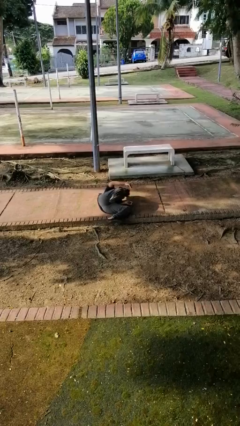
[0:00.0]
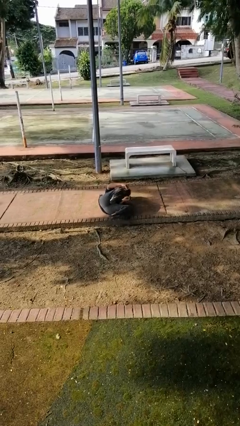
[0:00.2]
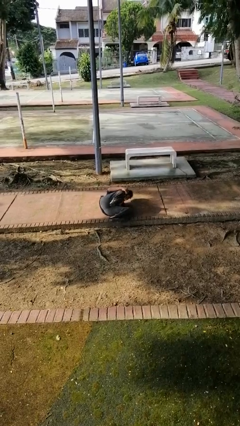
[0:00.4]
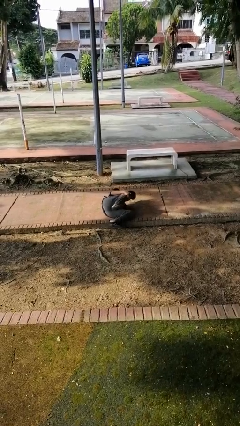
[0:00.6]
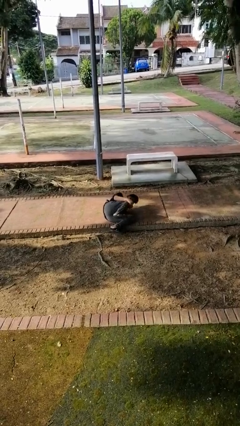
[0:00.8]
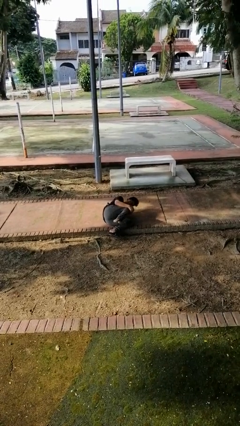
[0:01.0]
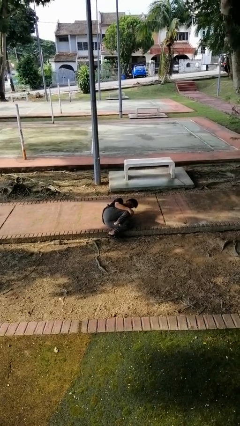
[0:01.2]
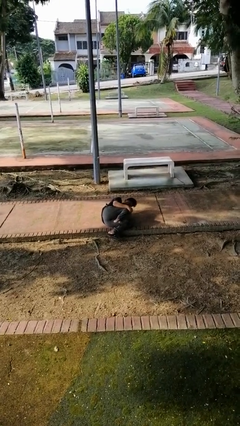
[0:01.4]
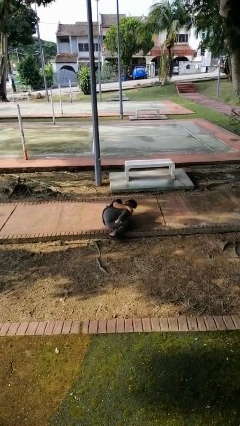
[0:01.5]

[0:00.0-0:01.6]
person lies down on floor

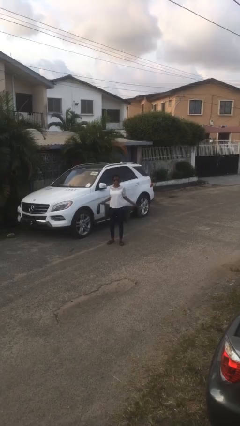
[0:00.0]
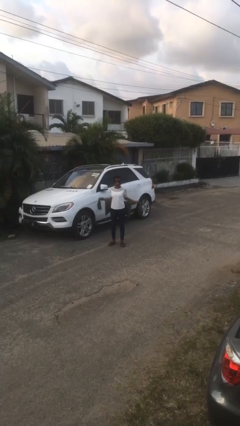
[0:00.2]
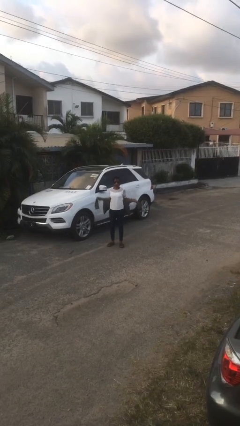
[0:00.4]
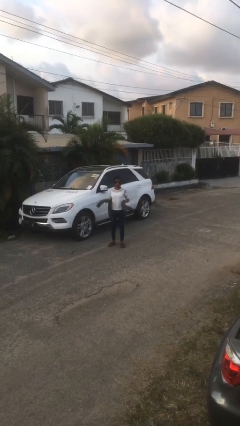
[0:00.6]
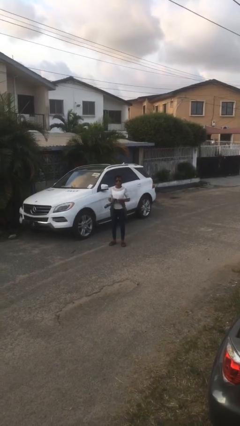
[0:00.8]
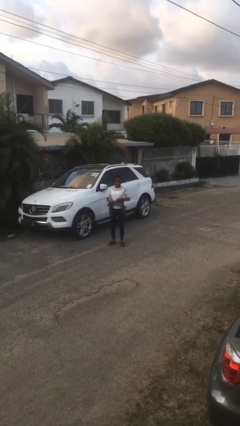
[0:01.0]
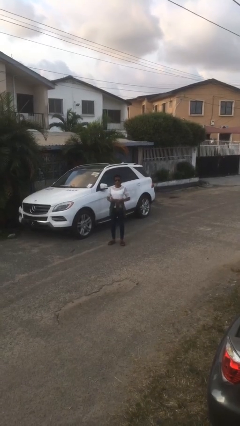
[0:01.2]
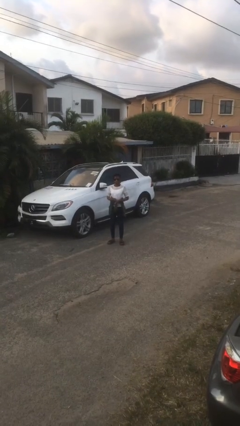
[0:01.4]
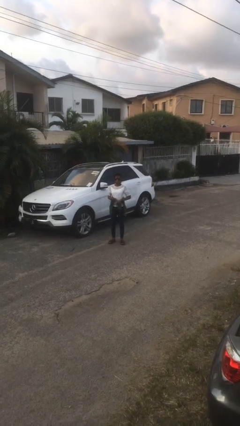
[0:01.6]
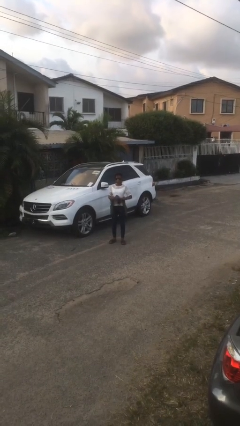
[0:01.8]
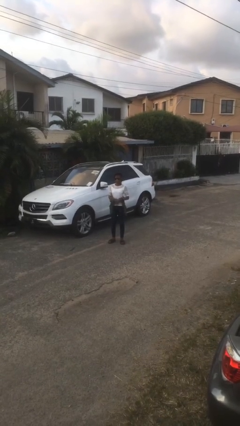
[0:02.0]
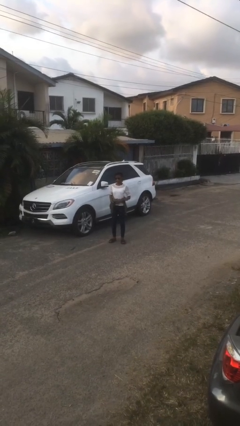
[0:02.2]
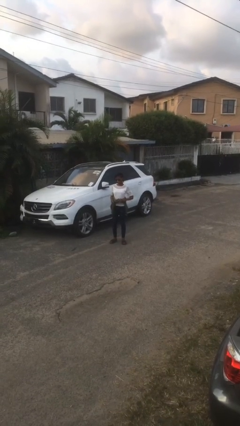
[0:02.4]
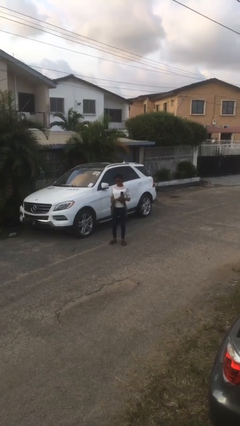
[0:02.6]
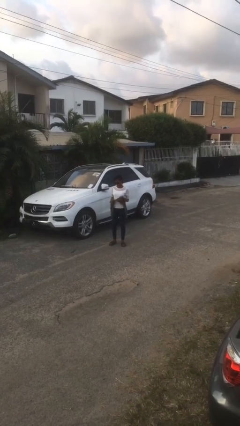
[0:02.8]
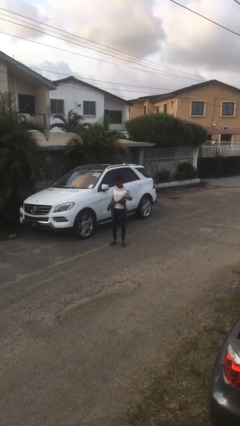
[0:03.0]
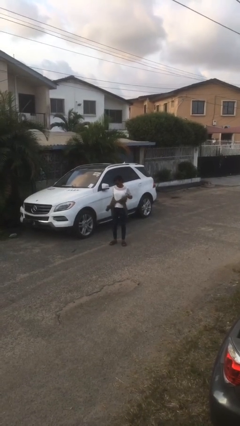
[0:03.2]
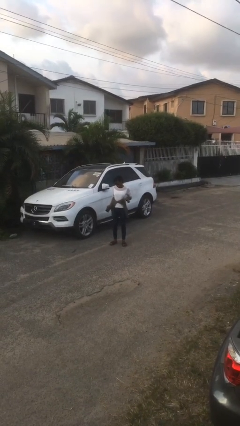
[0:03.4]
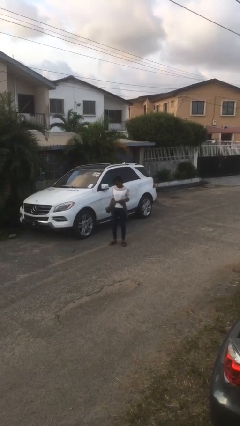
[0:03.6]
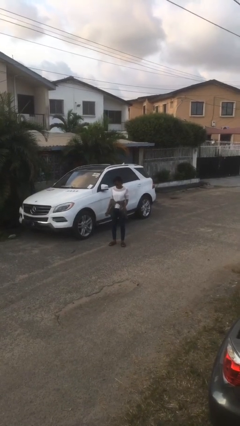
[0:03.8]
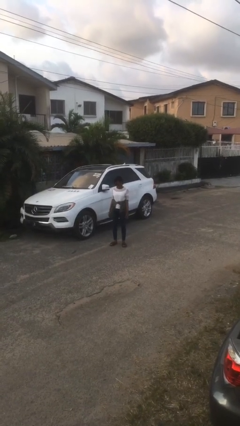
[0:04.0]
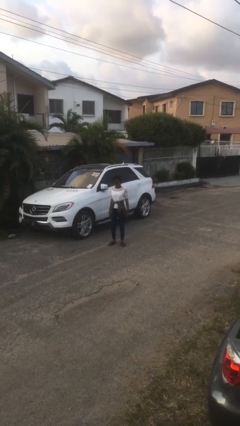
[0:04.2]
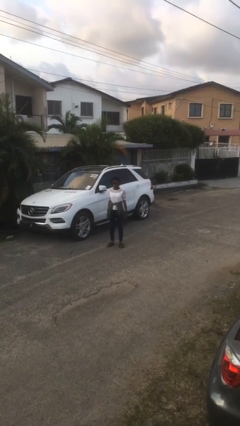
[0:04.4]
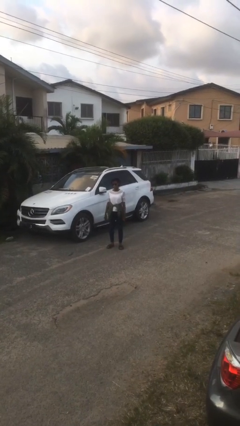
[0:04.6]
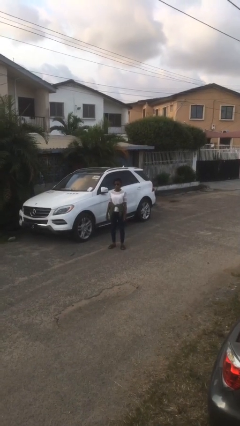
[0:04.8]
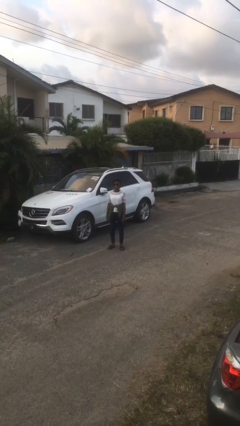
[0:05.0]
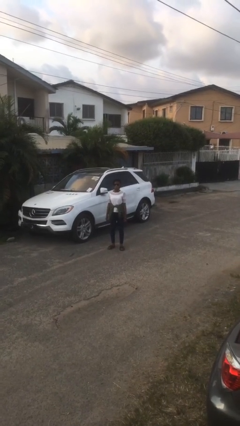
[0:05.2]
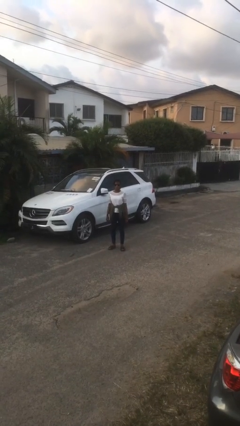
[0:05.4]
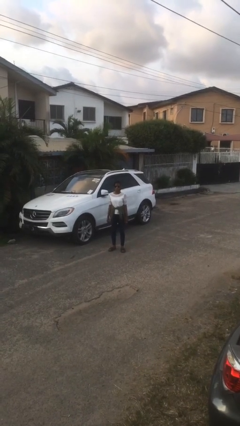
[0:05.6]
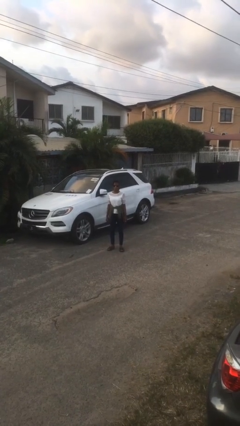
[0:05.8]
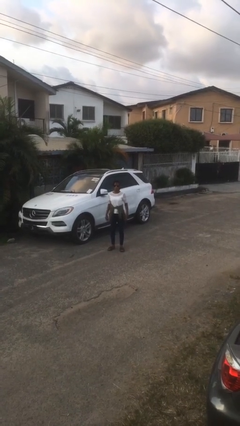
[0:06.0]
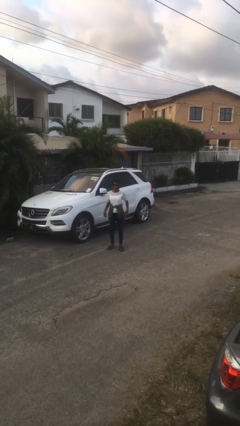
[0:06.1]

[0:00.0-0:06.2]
person ties jacket around waist

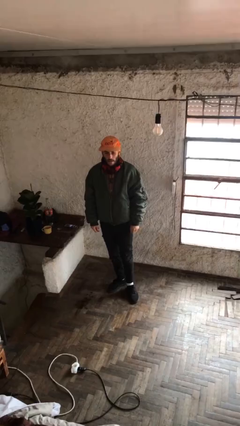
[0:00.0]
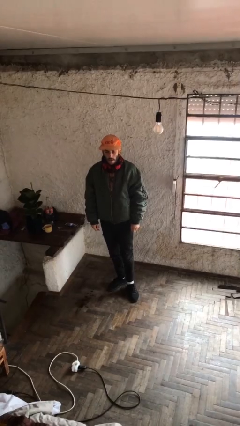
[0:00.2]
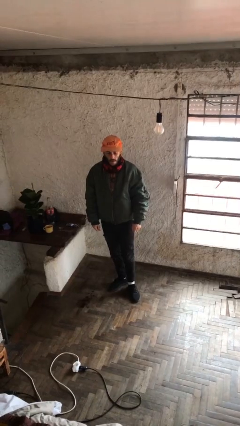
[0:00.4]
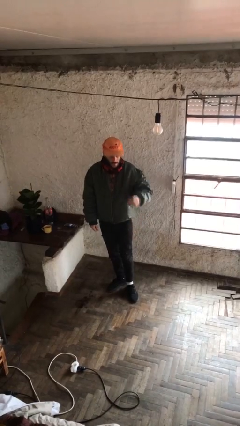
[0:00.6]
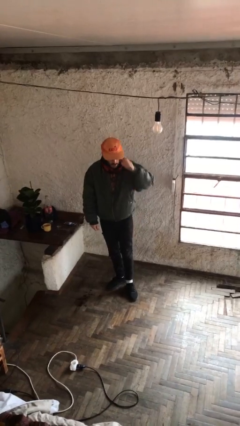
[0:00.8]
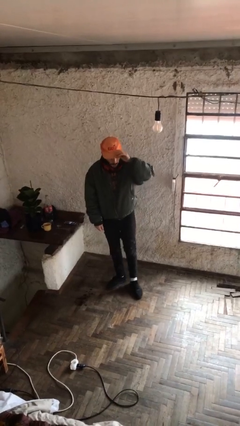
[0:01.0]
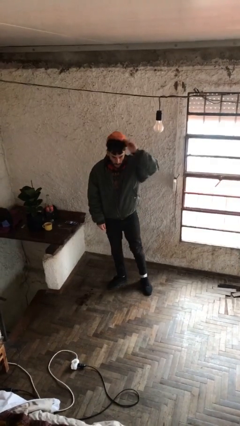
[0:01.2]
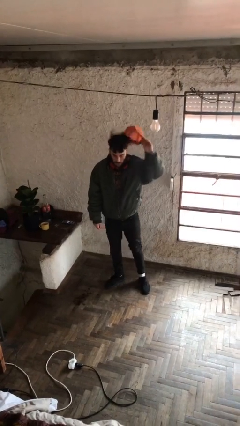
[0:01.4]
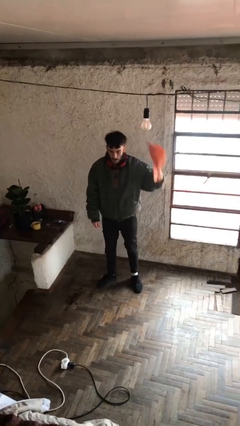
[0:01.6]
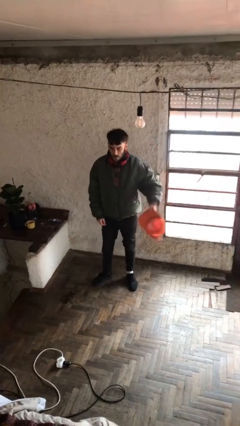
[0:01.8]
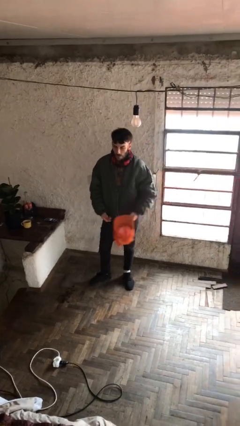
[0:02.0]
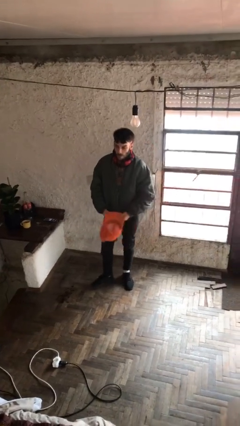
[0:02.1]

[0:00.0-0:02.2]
person takes off hat

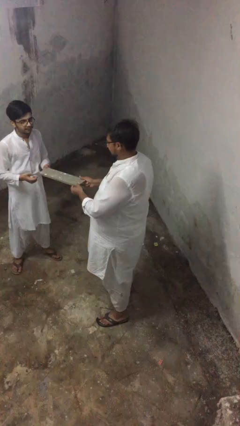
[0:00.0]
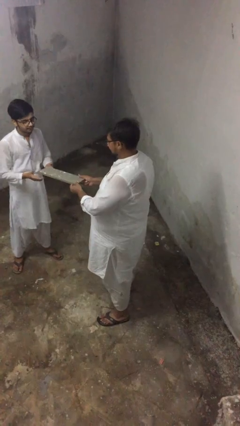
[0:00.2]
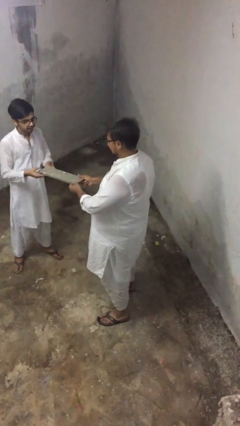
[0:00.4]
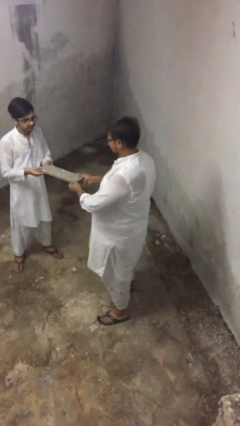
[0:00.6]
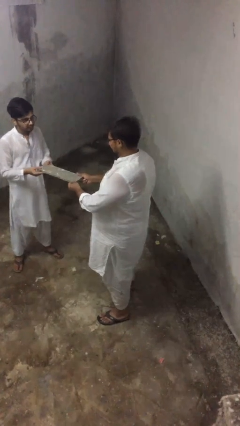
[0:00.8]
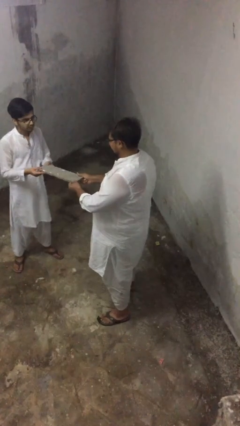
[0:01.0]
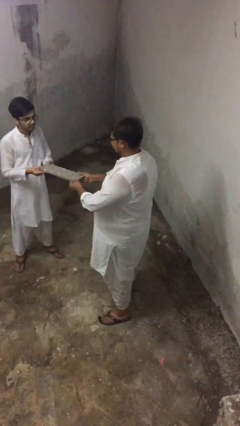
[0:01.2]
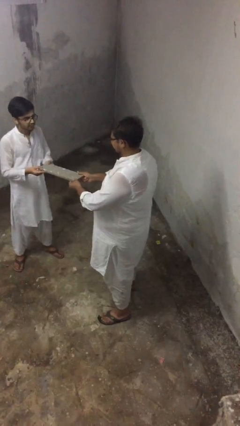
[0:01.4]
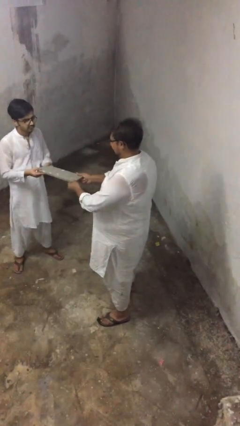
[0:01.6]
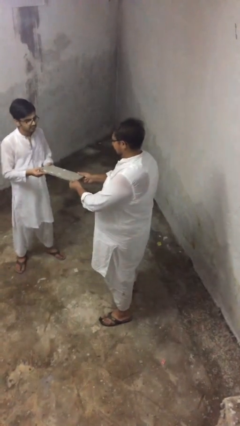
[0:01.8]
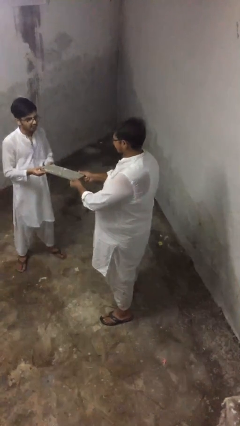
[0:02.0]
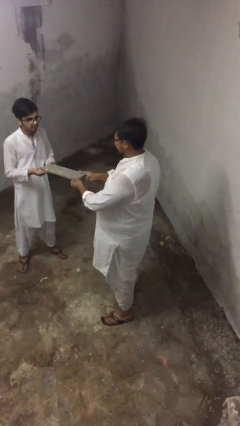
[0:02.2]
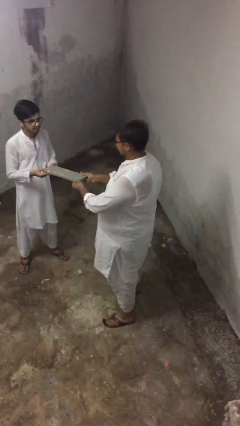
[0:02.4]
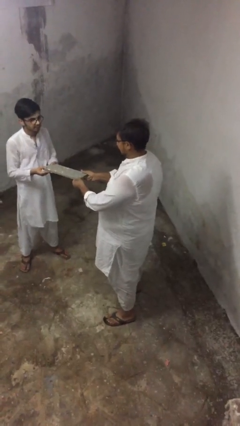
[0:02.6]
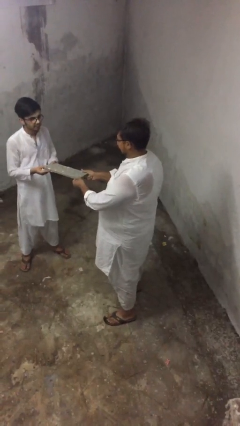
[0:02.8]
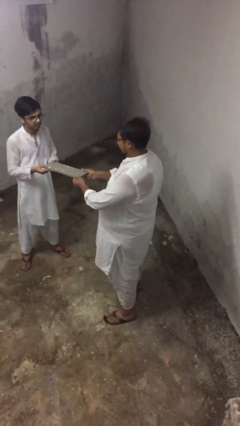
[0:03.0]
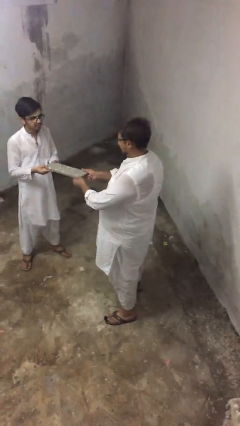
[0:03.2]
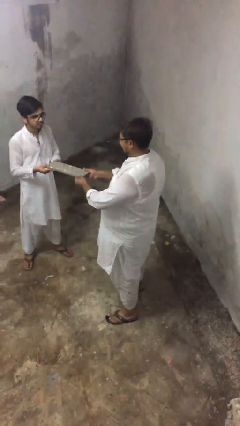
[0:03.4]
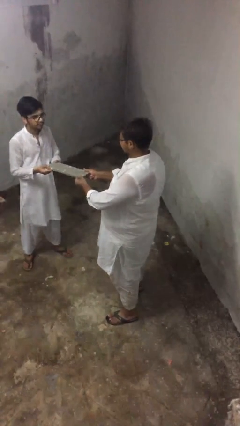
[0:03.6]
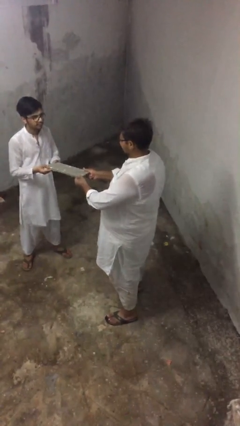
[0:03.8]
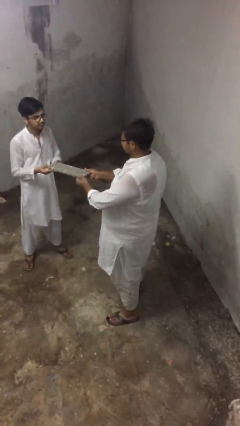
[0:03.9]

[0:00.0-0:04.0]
person transfers object to person

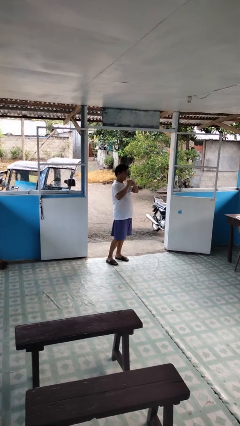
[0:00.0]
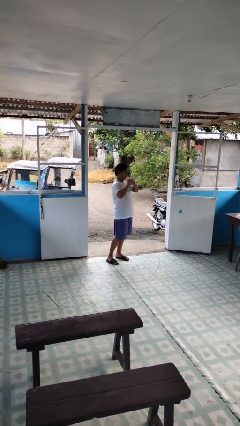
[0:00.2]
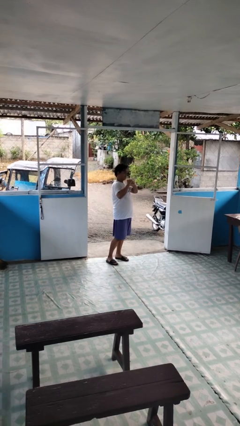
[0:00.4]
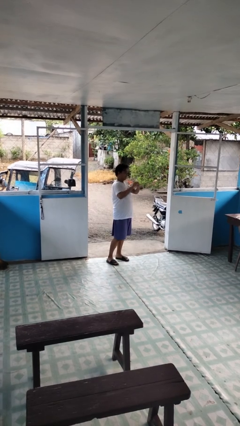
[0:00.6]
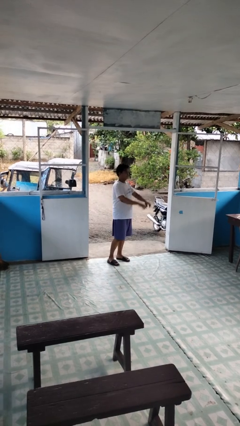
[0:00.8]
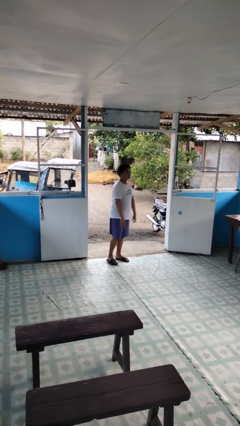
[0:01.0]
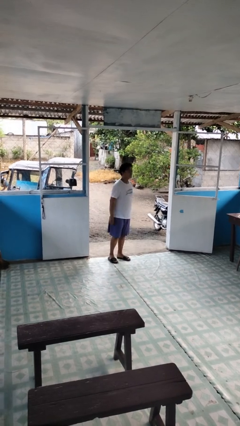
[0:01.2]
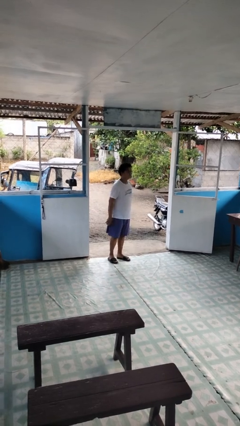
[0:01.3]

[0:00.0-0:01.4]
person gestures heart

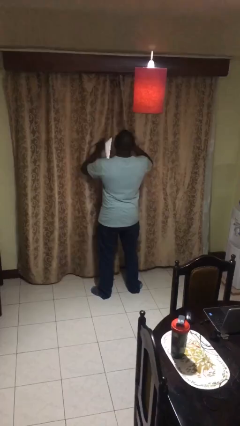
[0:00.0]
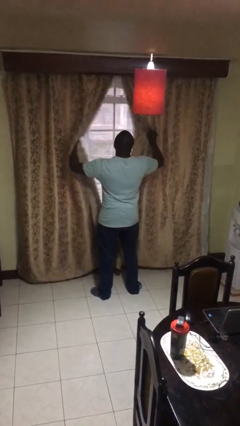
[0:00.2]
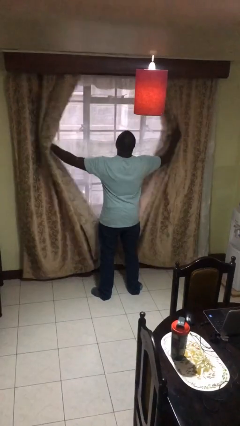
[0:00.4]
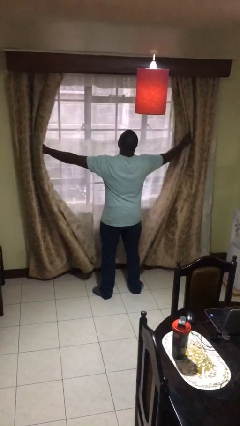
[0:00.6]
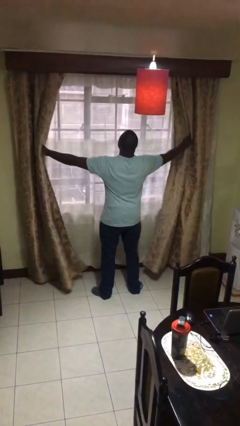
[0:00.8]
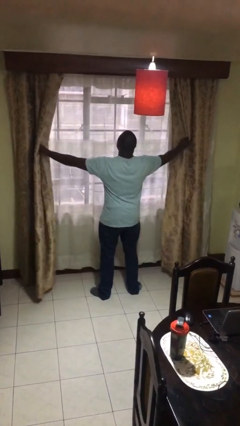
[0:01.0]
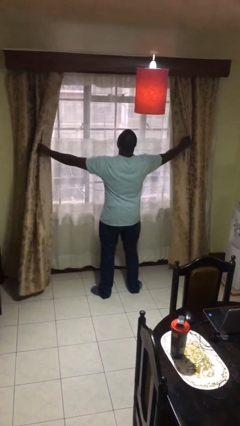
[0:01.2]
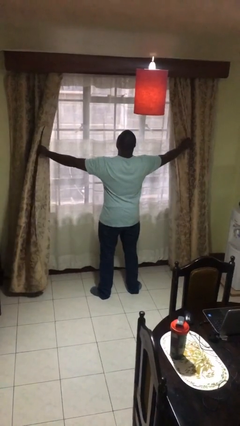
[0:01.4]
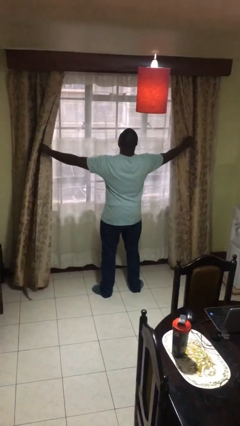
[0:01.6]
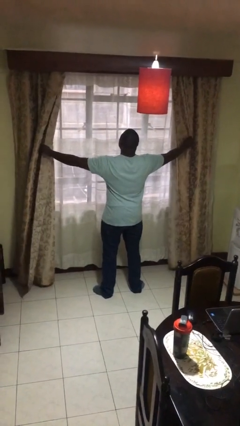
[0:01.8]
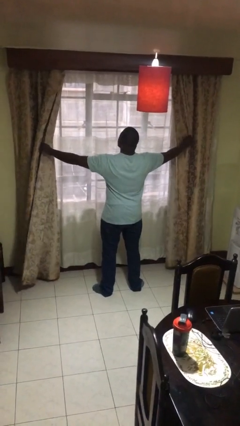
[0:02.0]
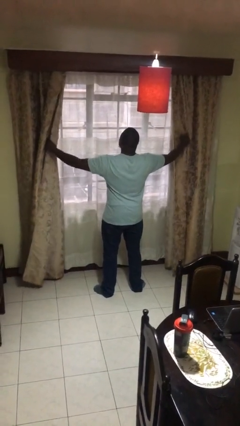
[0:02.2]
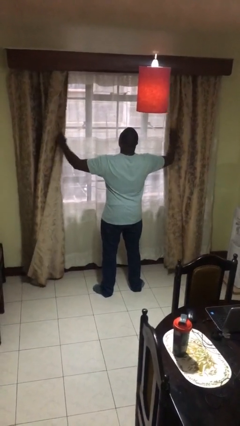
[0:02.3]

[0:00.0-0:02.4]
person opens curtains
